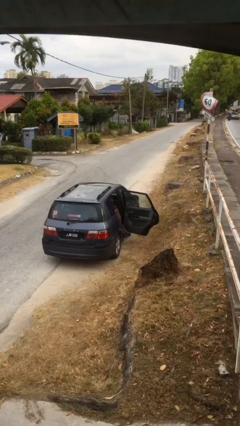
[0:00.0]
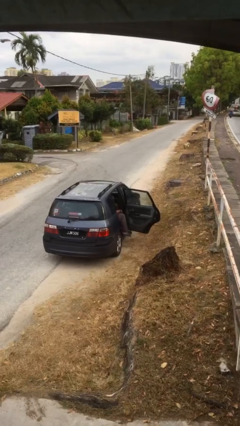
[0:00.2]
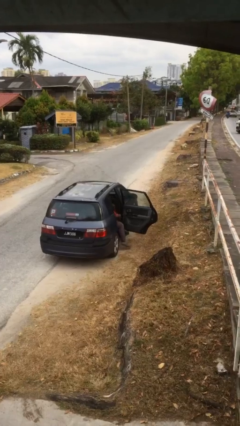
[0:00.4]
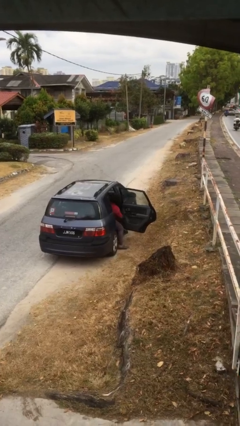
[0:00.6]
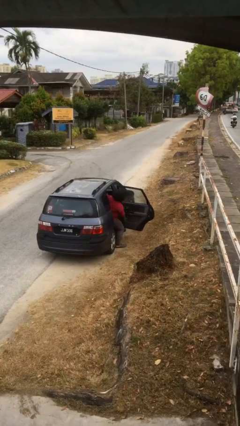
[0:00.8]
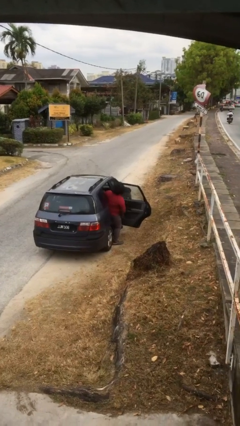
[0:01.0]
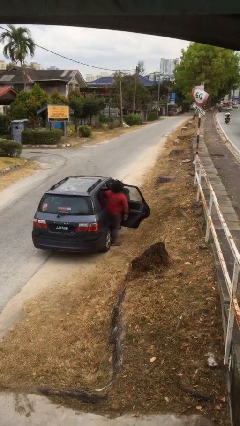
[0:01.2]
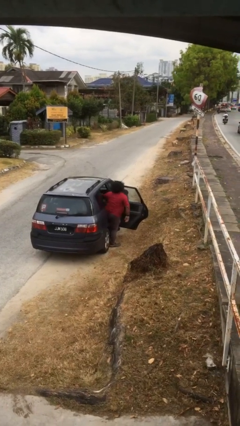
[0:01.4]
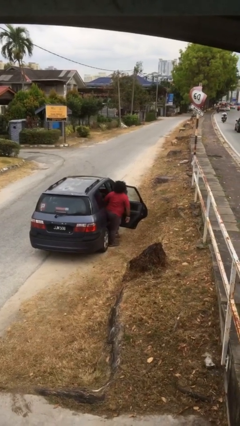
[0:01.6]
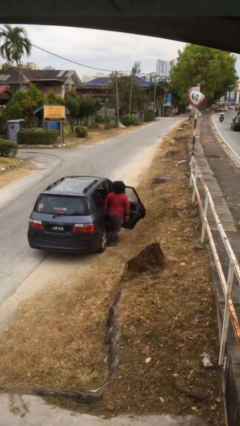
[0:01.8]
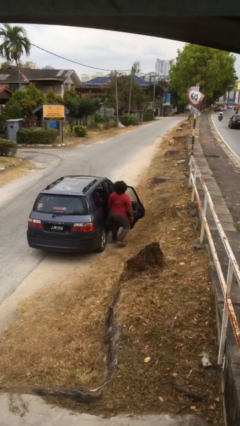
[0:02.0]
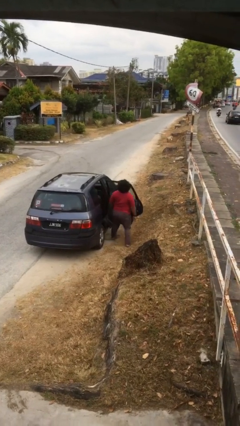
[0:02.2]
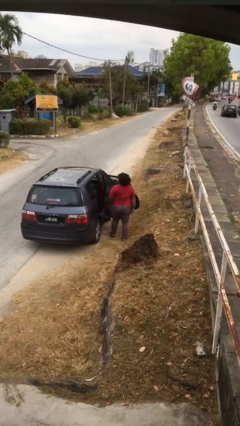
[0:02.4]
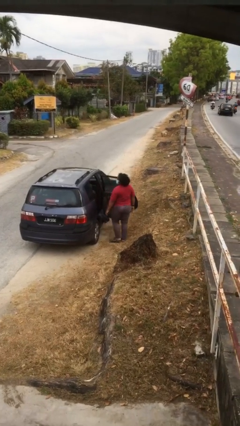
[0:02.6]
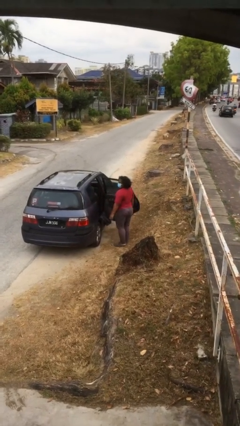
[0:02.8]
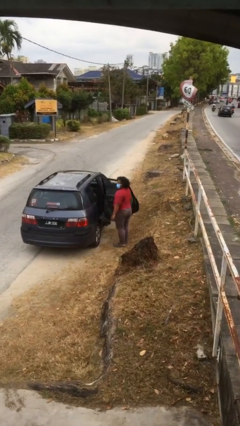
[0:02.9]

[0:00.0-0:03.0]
person exits car

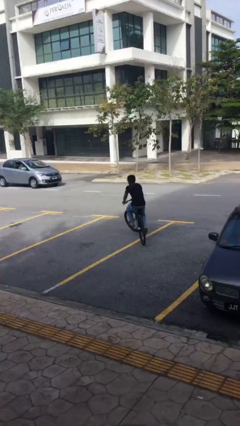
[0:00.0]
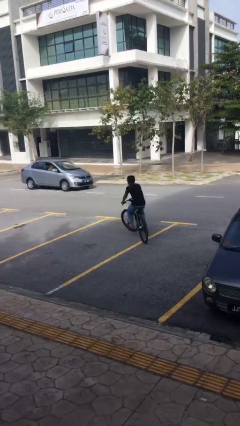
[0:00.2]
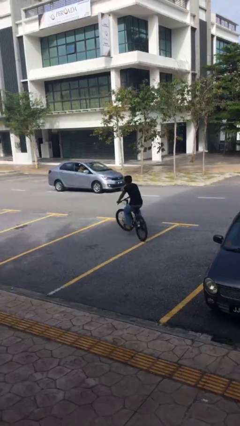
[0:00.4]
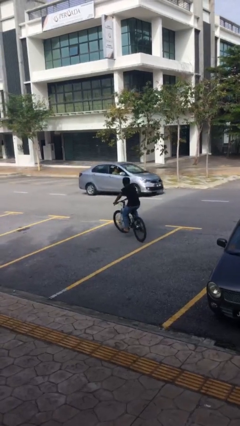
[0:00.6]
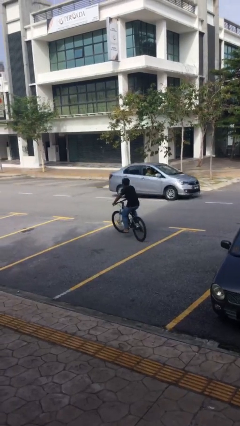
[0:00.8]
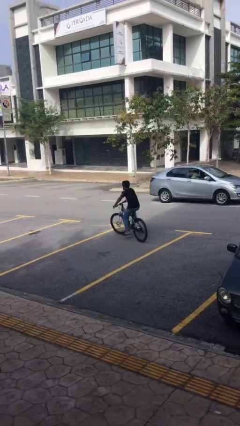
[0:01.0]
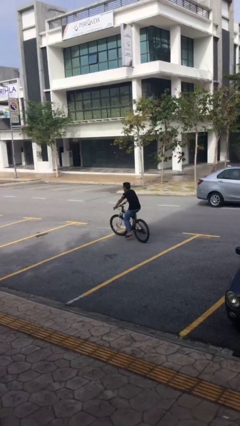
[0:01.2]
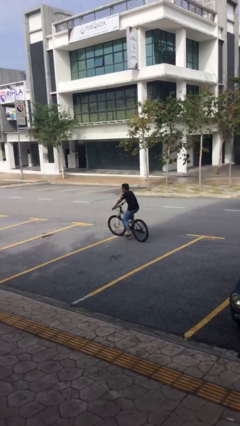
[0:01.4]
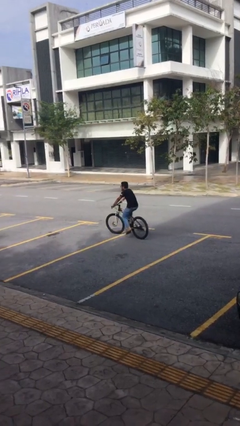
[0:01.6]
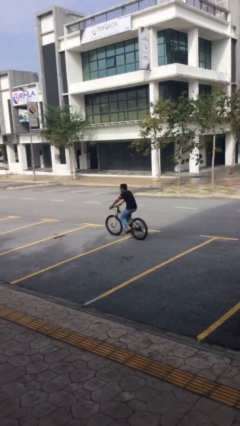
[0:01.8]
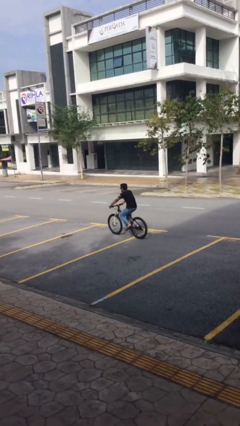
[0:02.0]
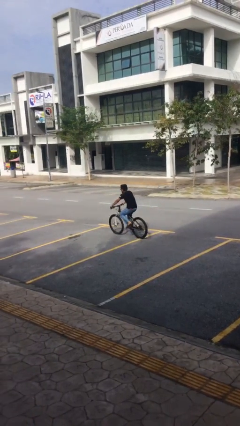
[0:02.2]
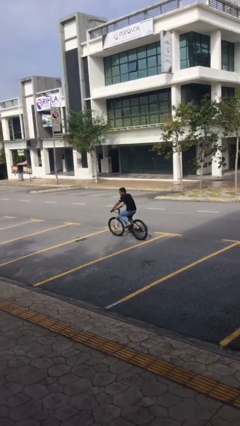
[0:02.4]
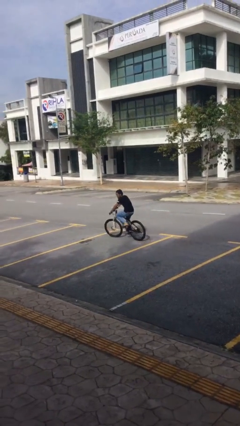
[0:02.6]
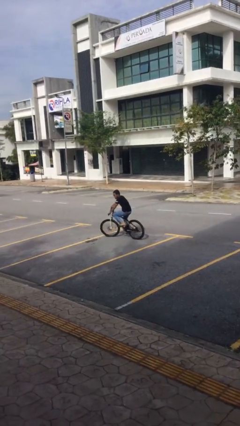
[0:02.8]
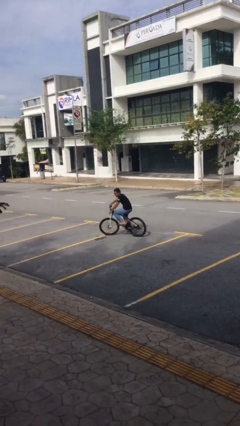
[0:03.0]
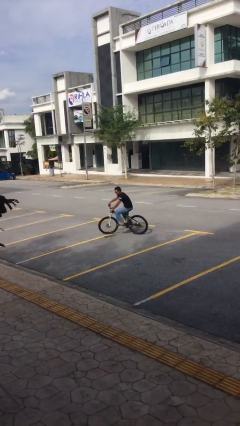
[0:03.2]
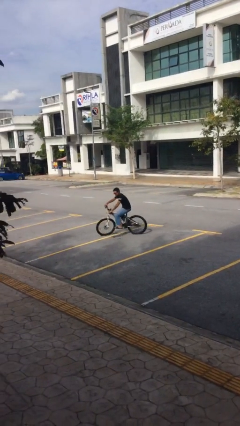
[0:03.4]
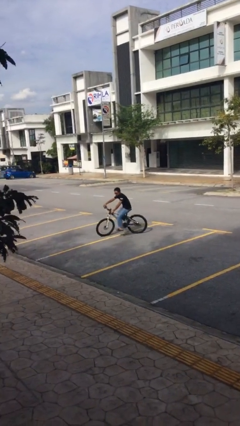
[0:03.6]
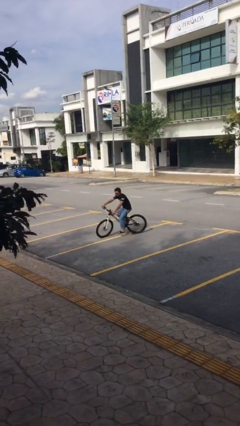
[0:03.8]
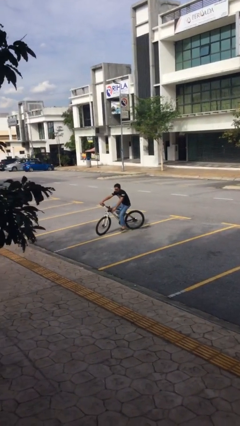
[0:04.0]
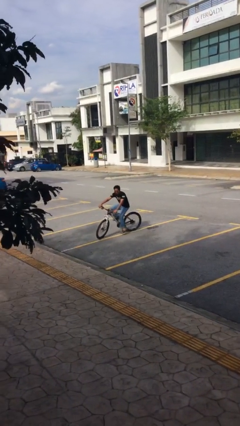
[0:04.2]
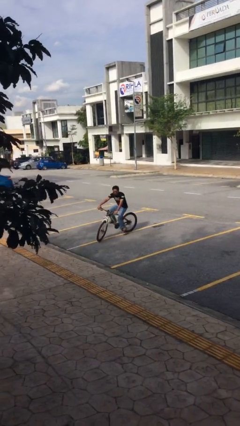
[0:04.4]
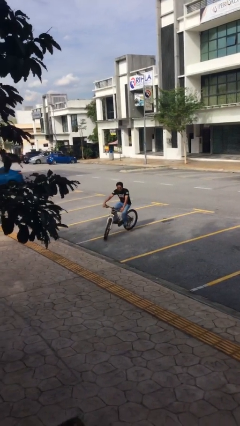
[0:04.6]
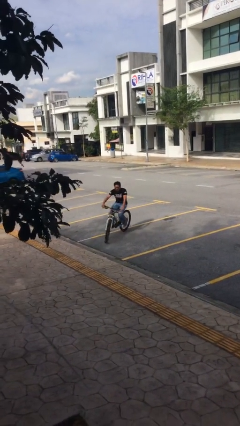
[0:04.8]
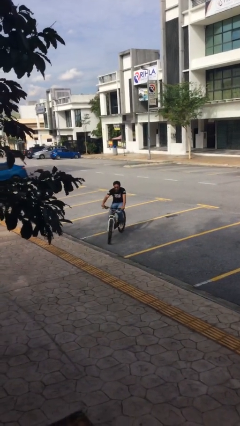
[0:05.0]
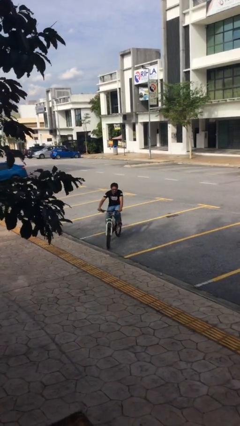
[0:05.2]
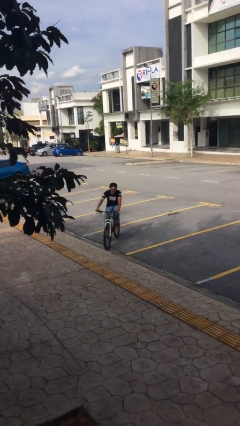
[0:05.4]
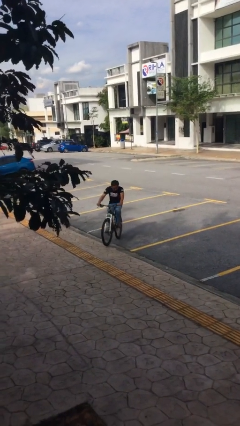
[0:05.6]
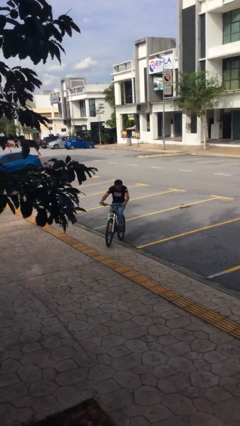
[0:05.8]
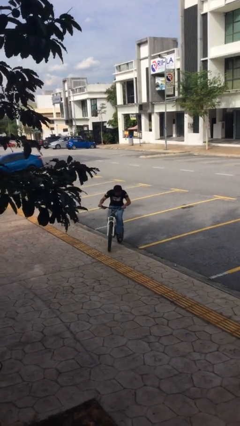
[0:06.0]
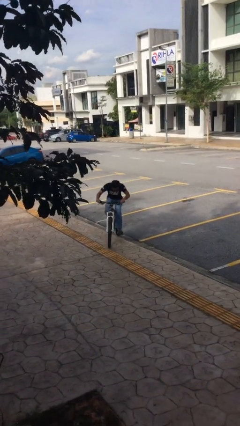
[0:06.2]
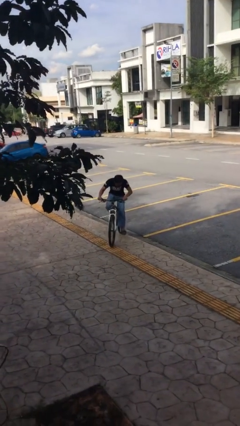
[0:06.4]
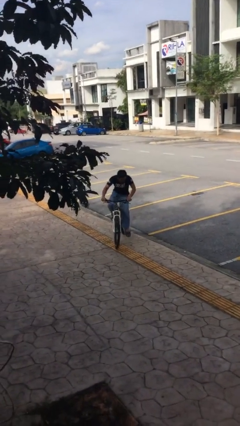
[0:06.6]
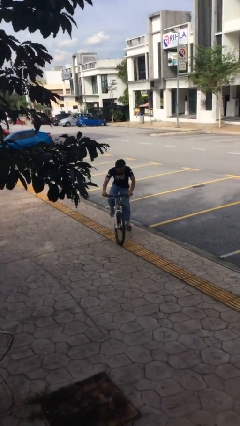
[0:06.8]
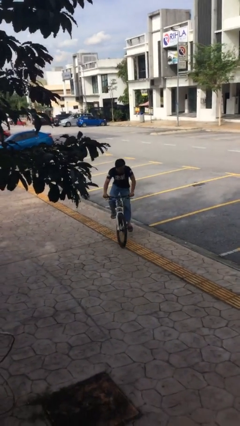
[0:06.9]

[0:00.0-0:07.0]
person rides bicycle

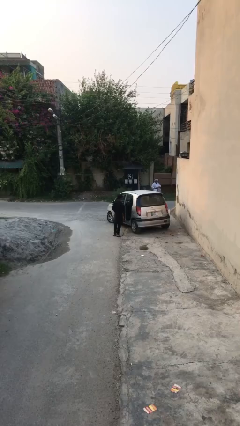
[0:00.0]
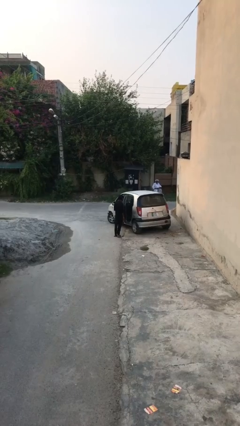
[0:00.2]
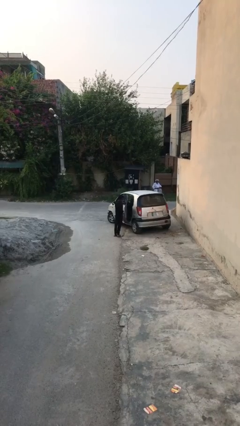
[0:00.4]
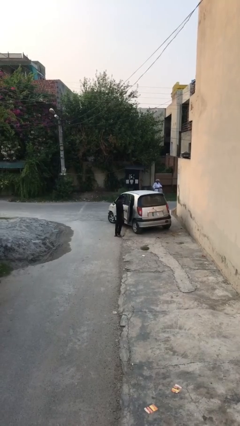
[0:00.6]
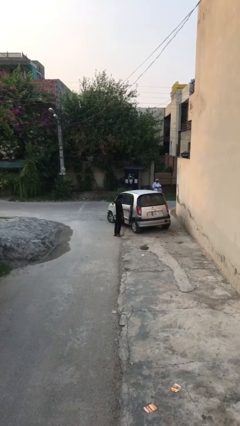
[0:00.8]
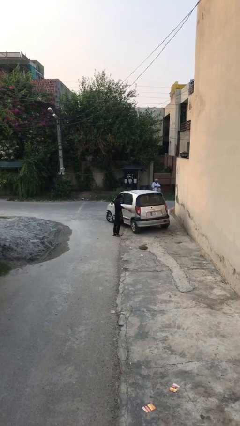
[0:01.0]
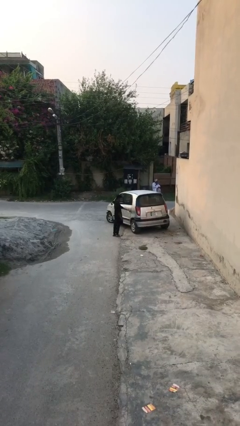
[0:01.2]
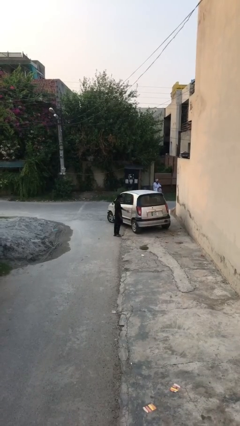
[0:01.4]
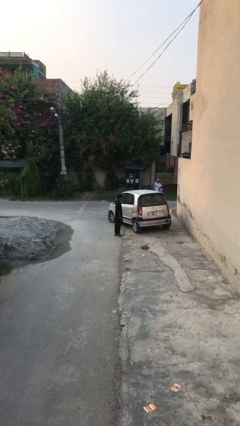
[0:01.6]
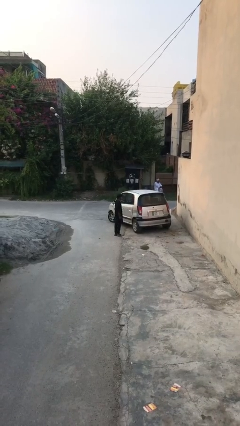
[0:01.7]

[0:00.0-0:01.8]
person closes car door

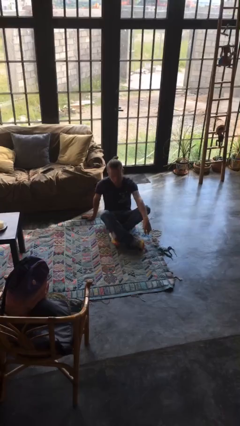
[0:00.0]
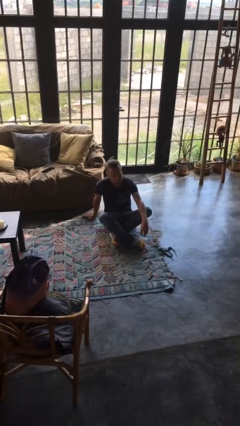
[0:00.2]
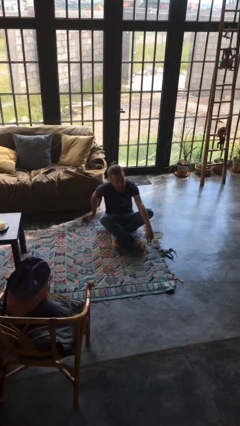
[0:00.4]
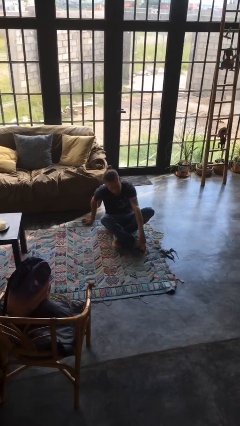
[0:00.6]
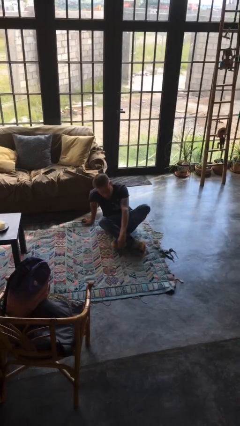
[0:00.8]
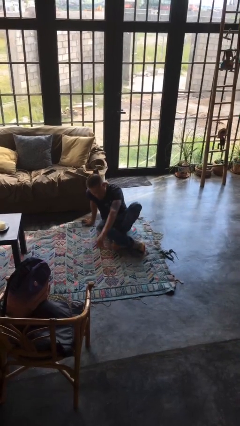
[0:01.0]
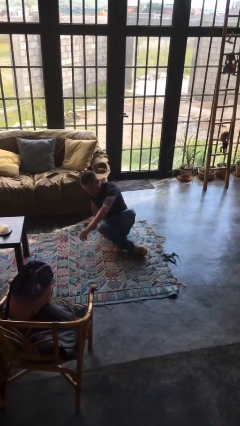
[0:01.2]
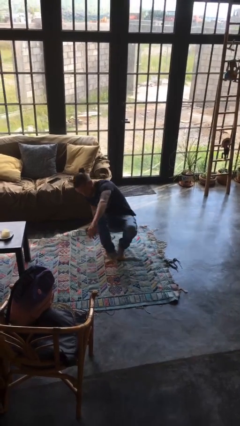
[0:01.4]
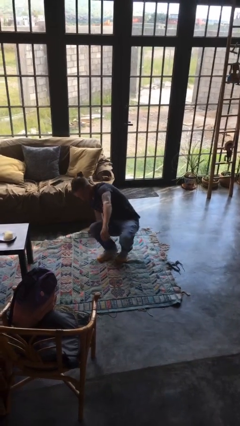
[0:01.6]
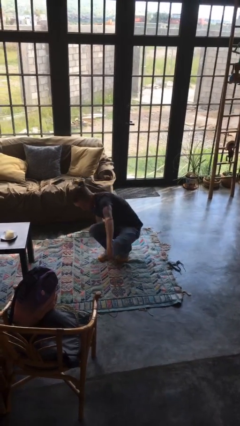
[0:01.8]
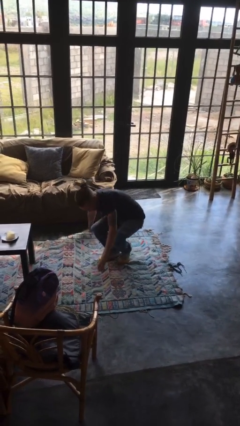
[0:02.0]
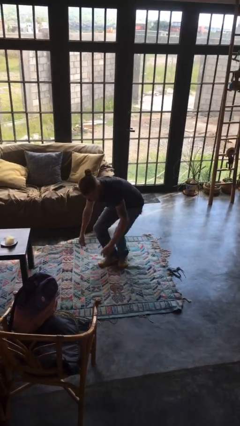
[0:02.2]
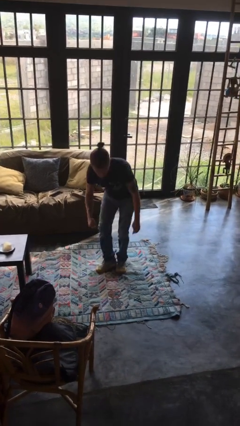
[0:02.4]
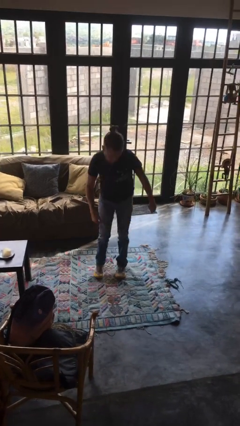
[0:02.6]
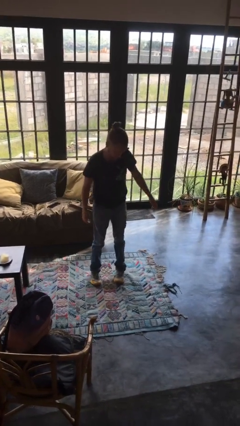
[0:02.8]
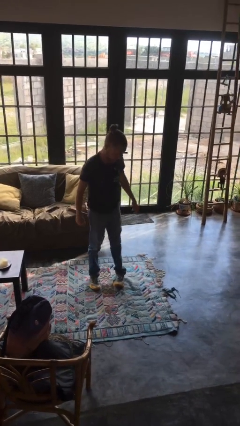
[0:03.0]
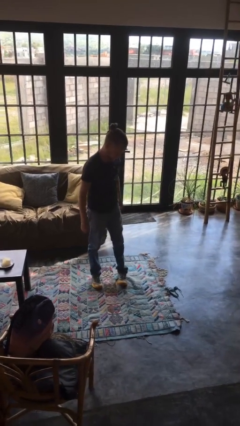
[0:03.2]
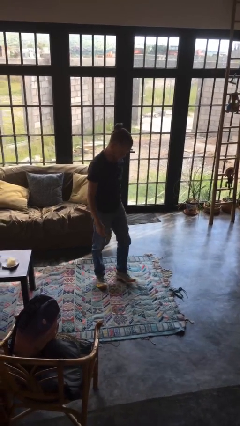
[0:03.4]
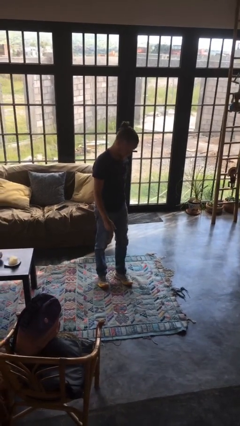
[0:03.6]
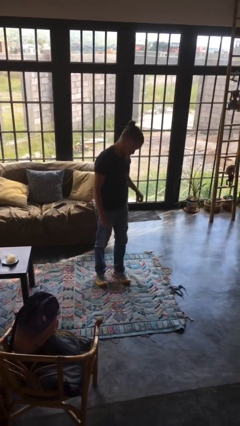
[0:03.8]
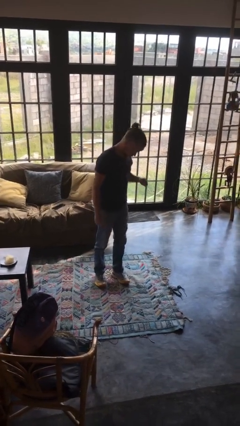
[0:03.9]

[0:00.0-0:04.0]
person stands up from floor

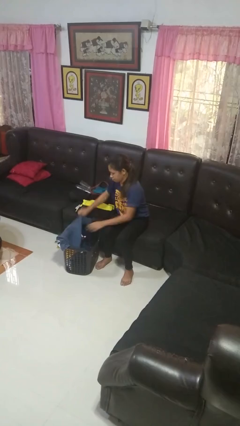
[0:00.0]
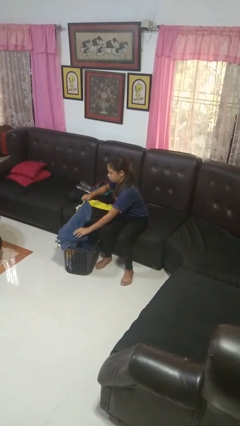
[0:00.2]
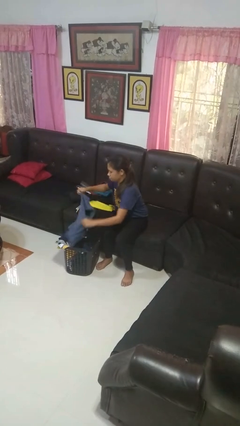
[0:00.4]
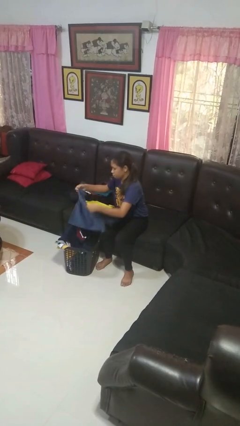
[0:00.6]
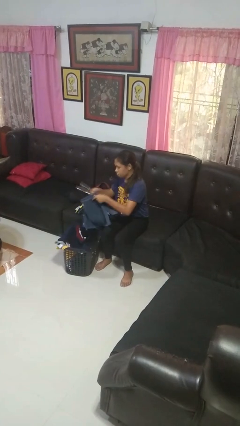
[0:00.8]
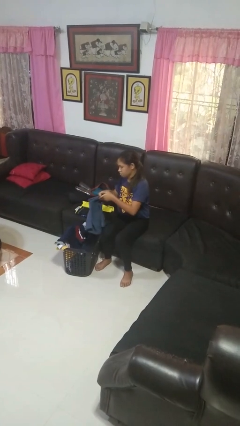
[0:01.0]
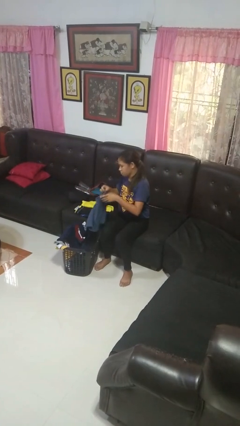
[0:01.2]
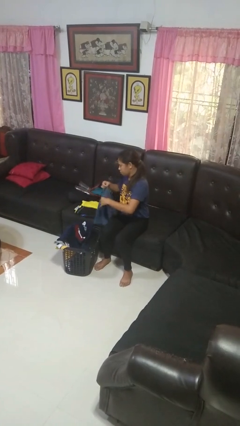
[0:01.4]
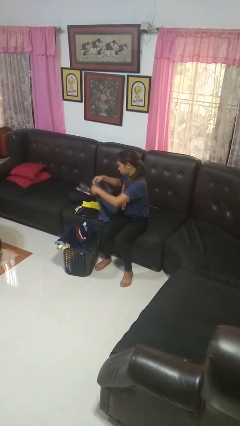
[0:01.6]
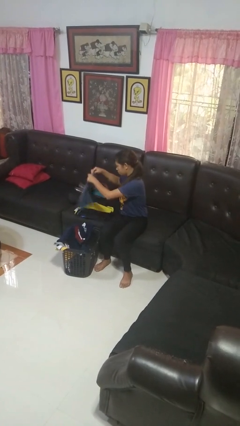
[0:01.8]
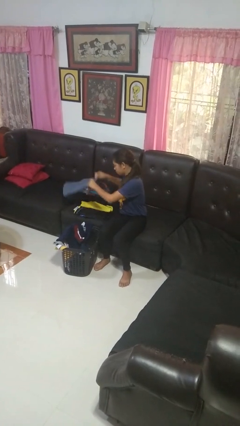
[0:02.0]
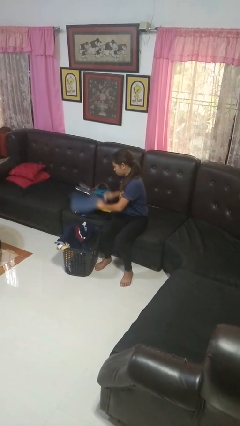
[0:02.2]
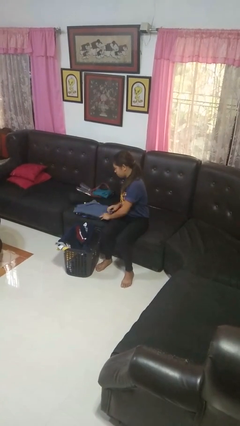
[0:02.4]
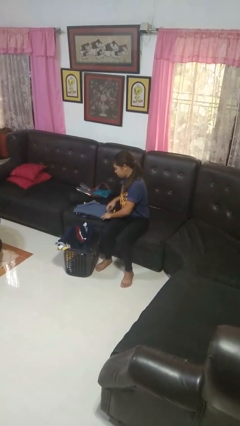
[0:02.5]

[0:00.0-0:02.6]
person folds shirt
